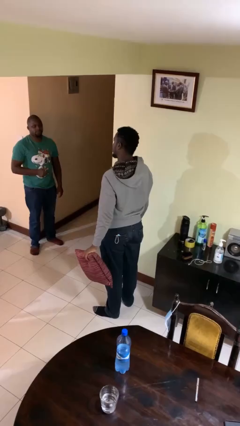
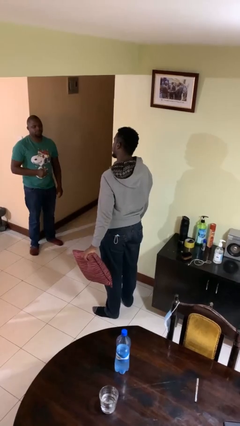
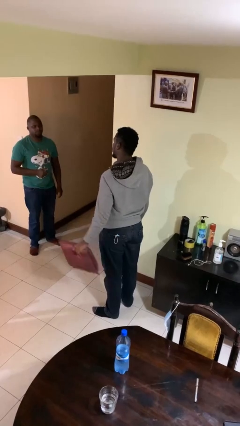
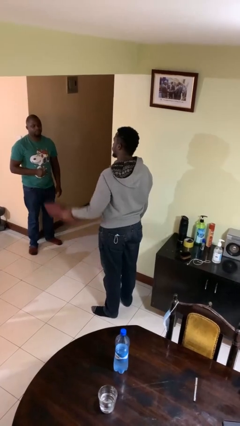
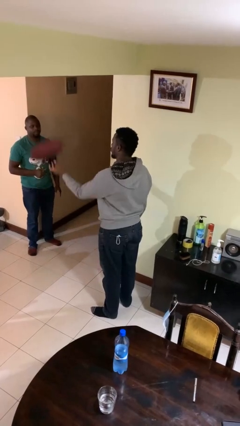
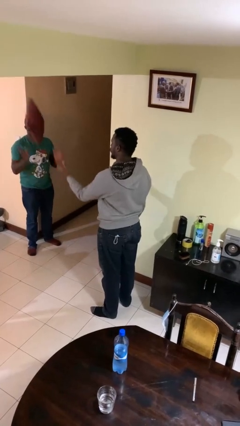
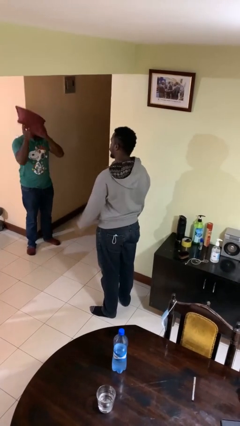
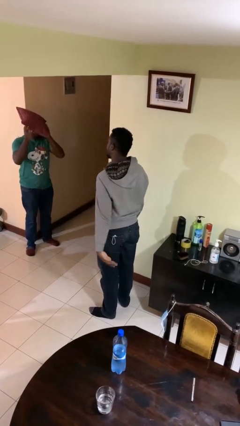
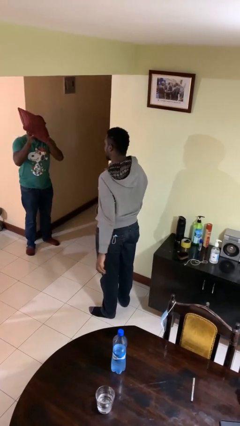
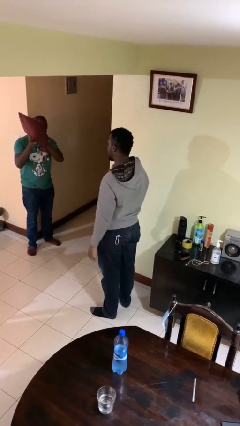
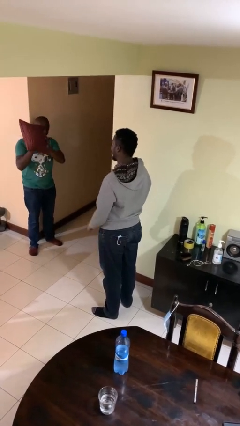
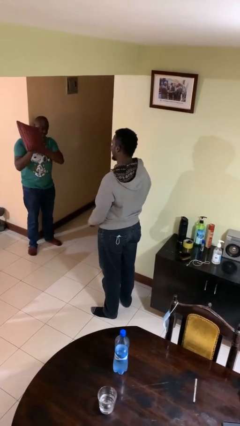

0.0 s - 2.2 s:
person throws object to person

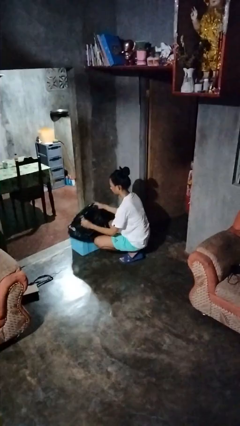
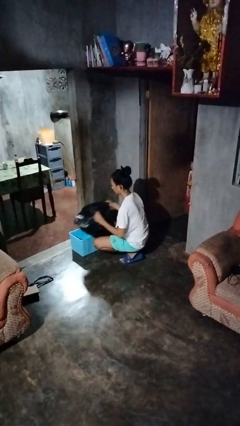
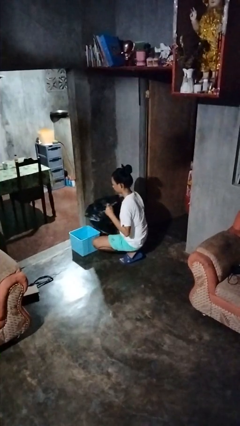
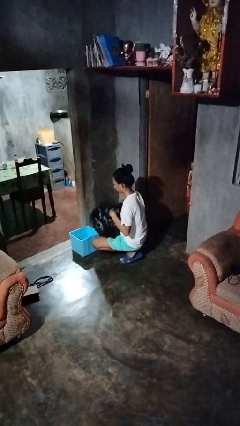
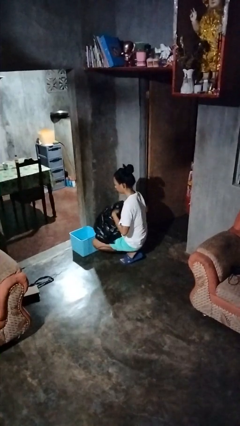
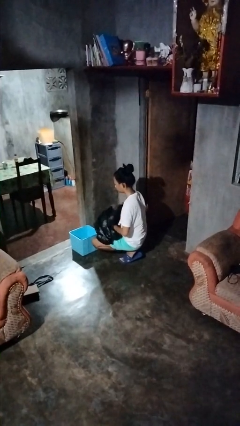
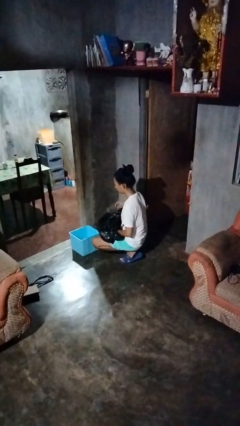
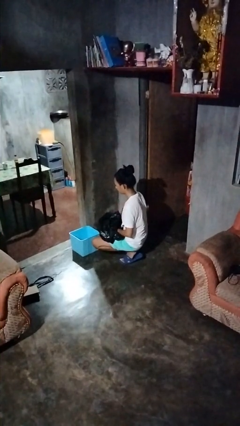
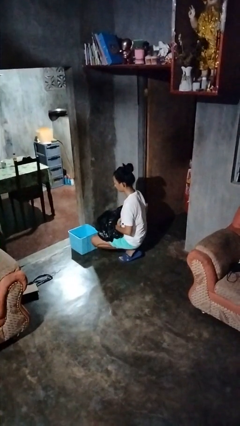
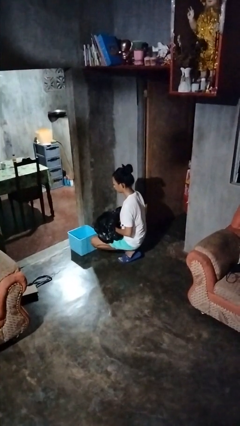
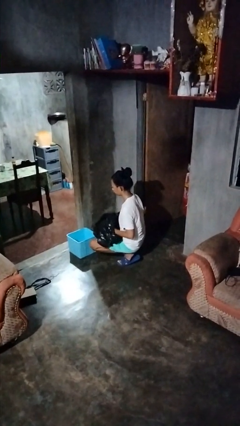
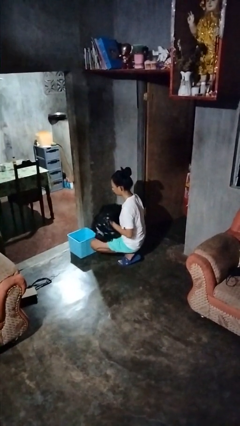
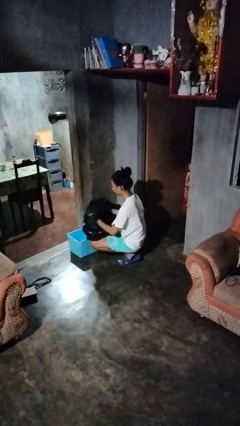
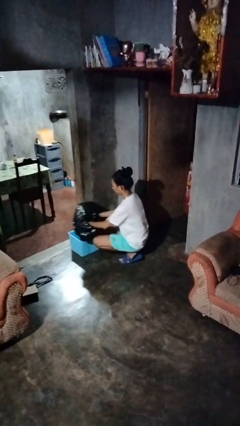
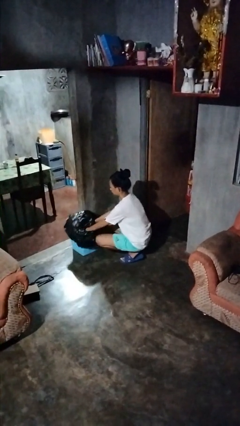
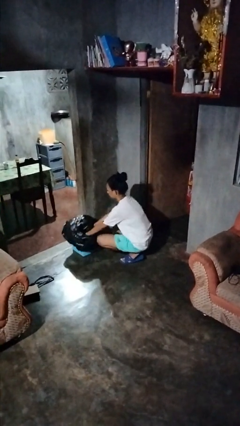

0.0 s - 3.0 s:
person removes trashbag from trashcan

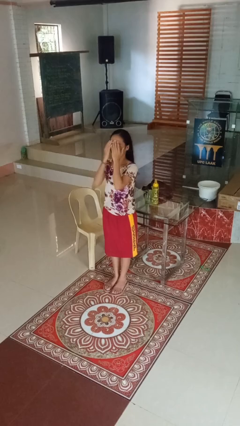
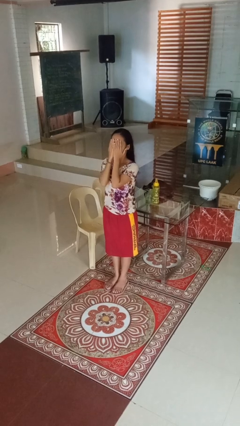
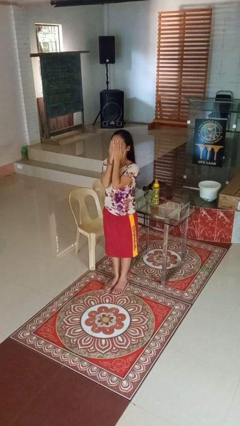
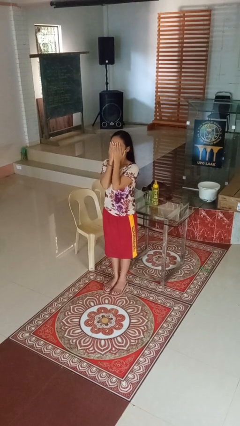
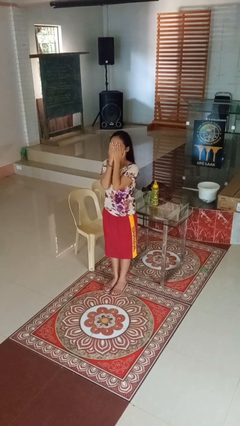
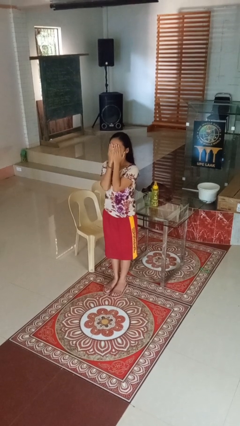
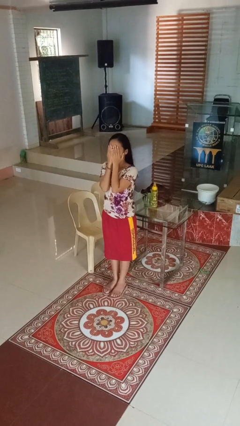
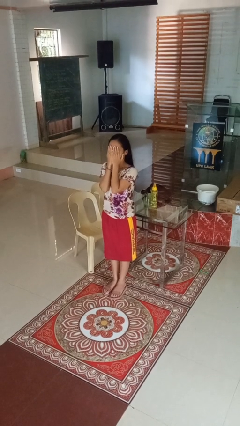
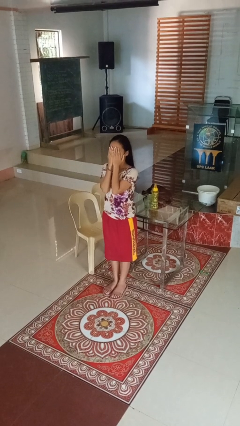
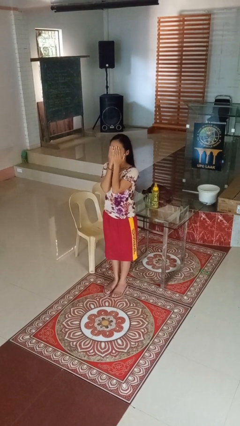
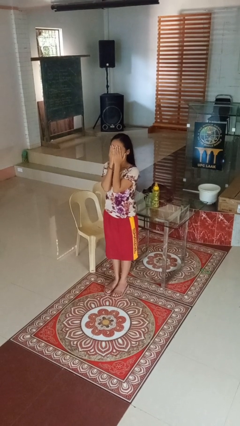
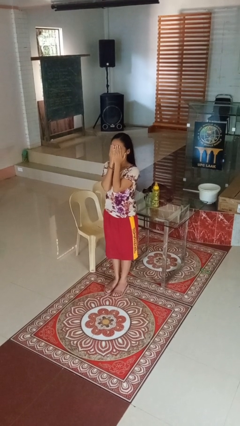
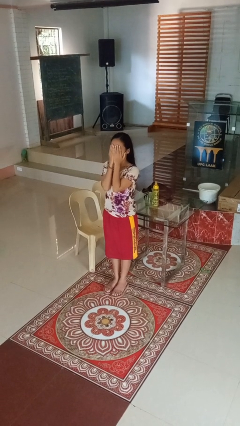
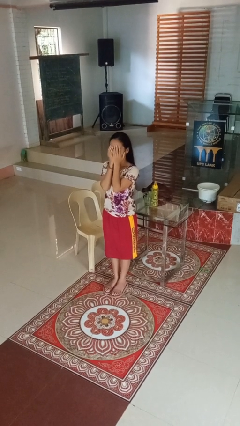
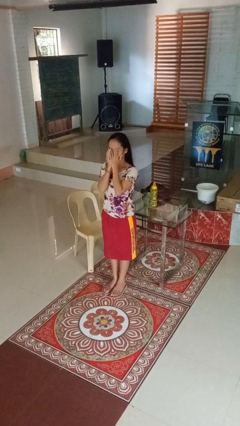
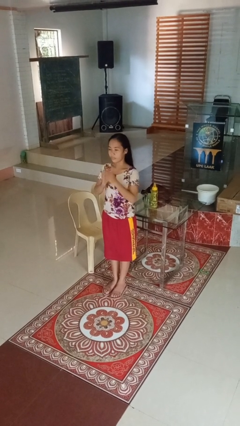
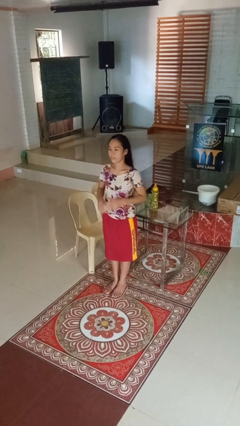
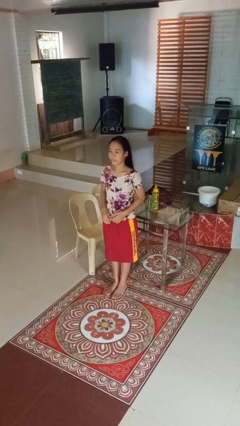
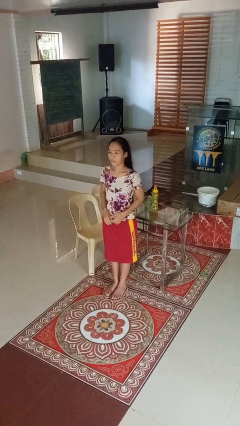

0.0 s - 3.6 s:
person covers face with hands

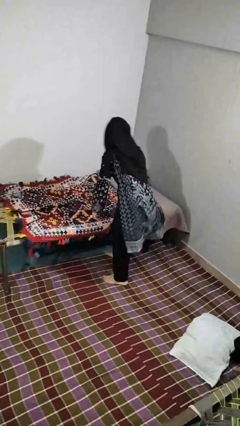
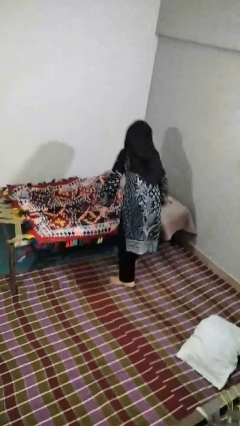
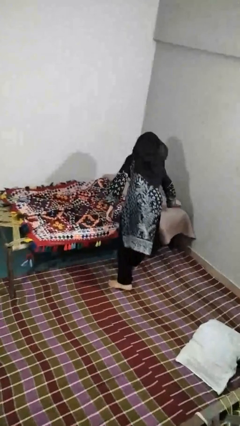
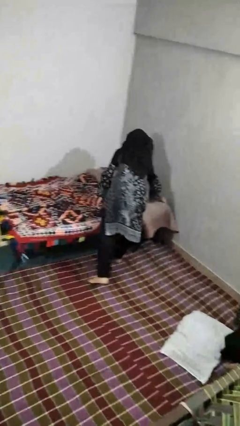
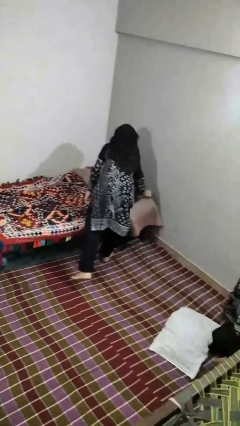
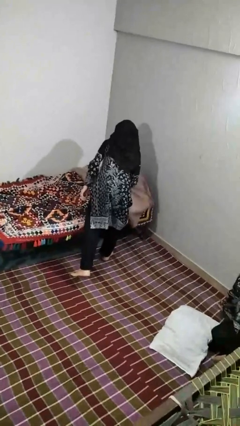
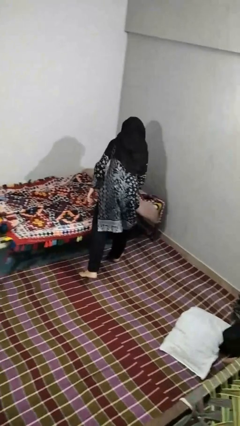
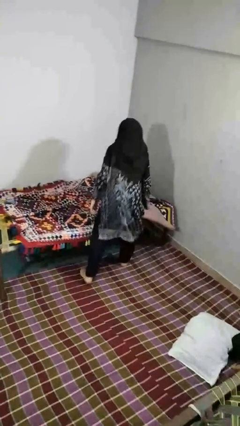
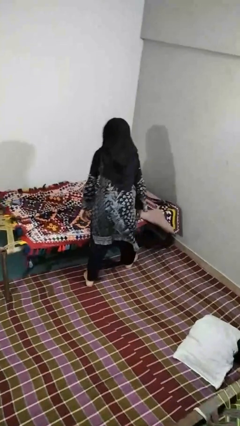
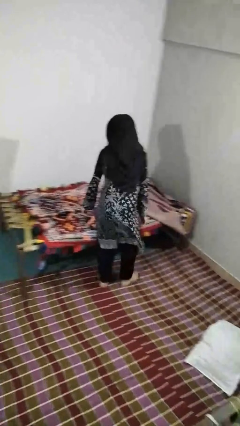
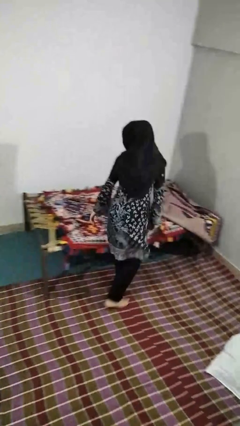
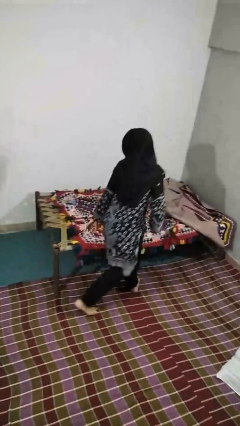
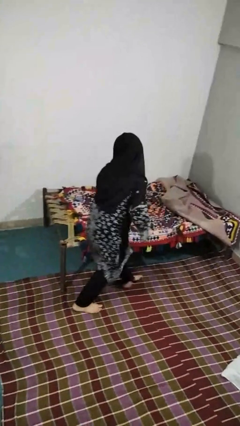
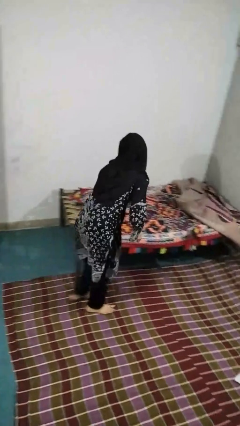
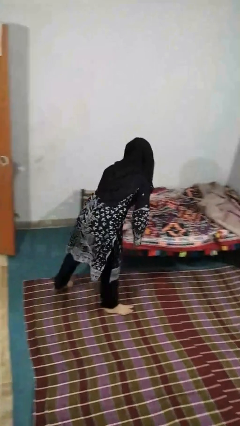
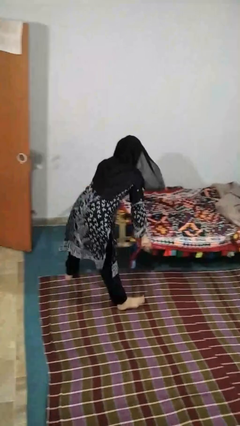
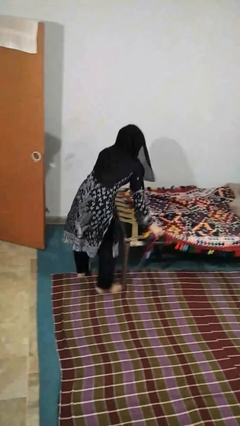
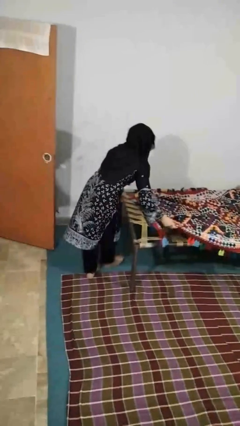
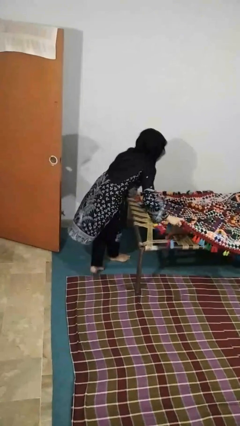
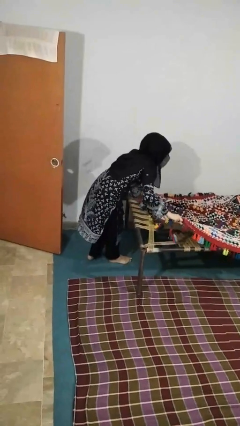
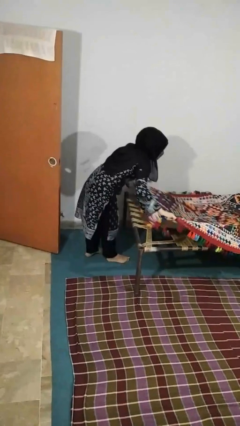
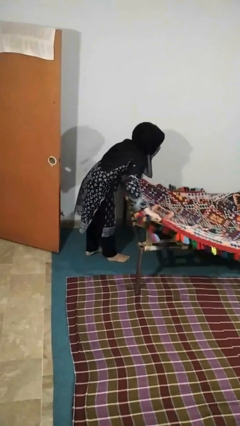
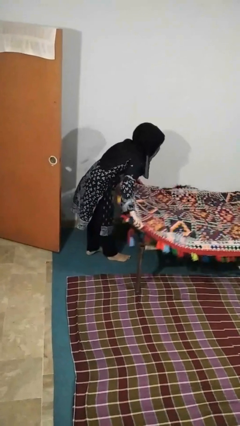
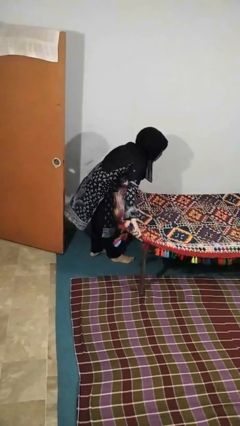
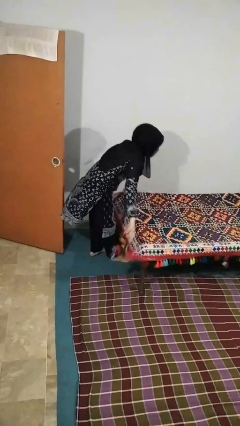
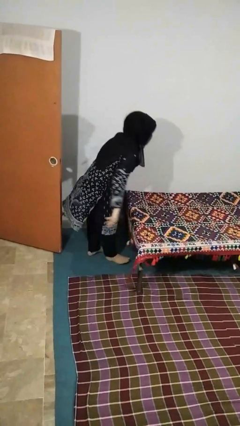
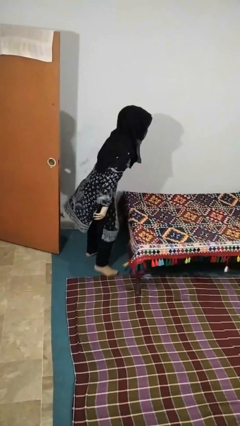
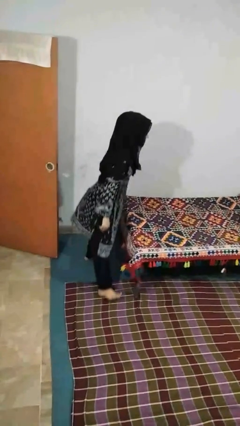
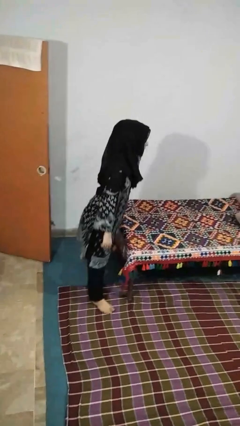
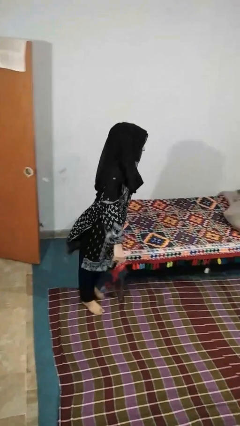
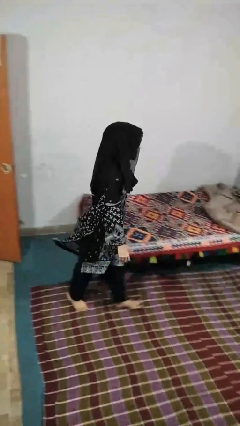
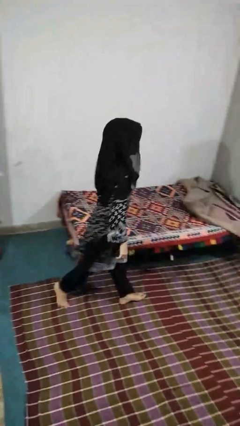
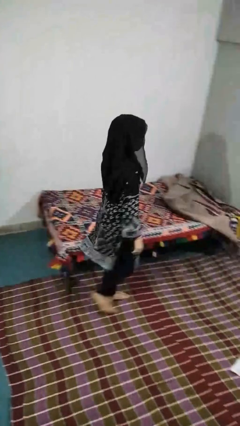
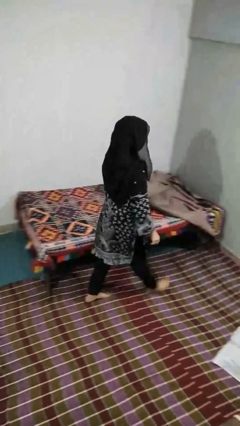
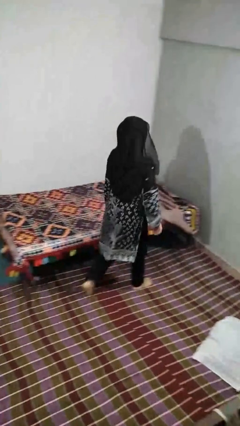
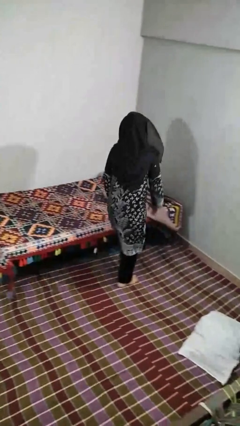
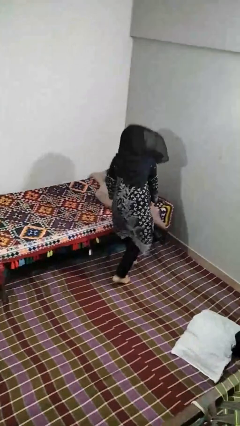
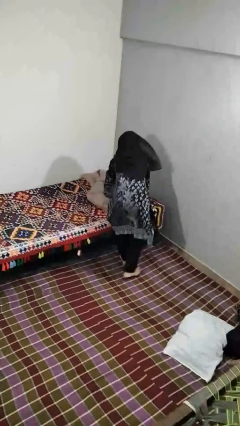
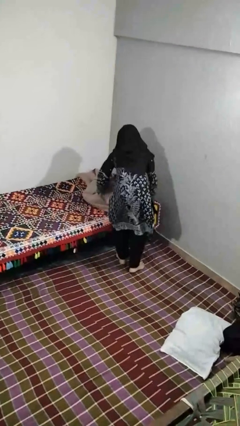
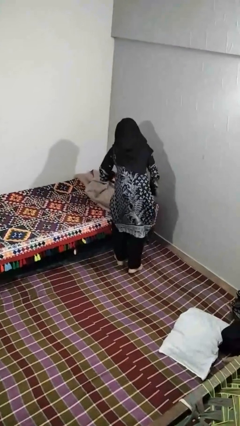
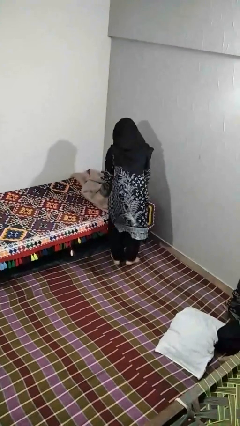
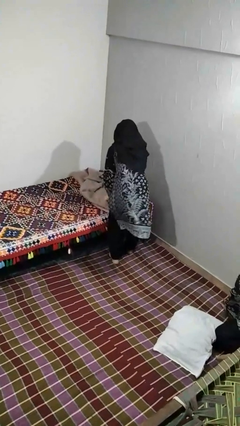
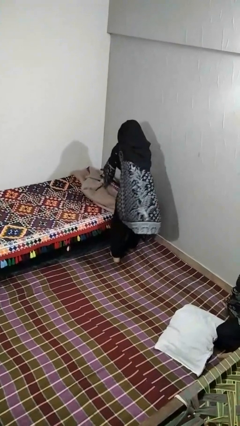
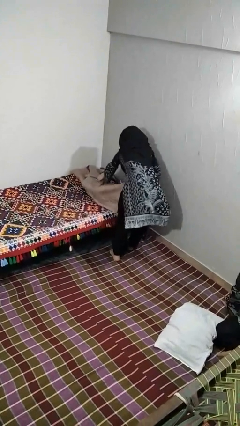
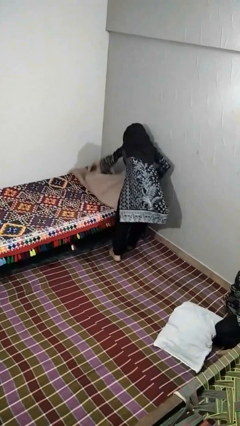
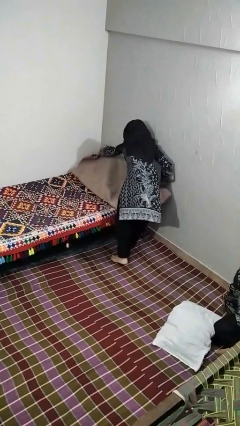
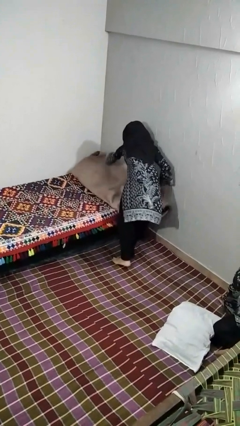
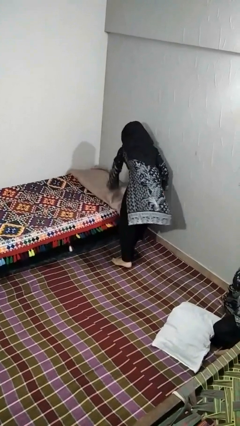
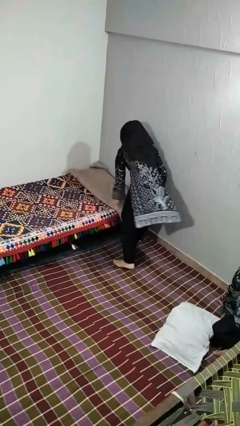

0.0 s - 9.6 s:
person makes bed
